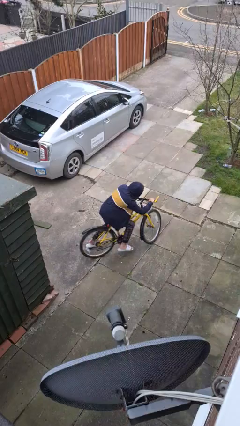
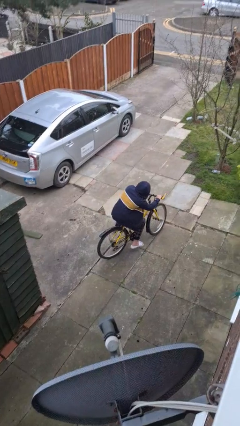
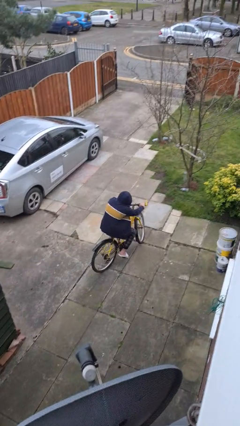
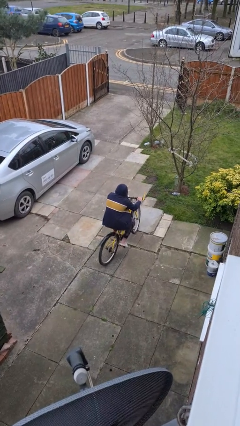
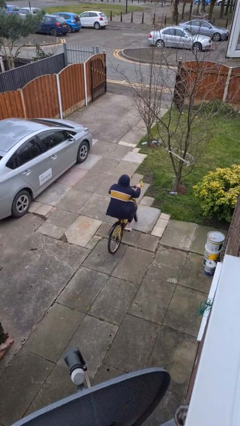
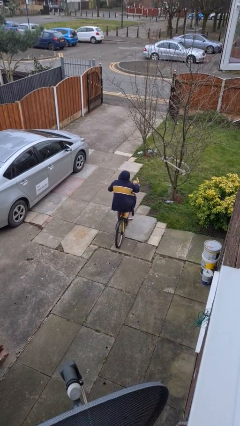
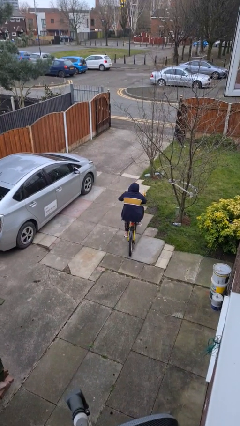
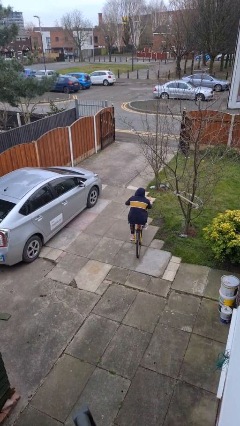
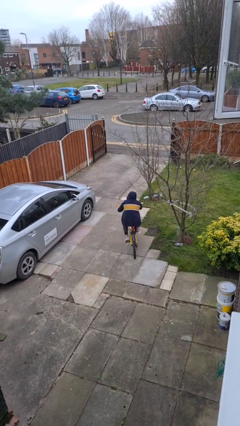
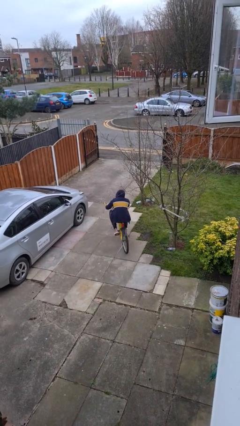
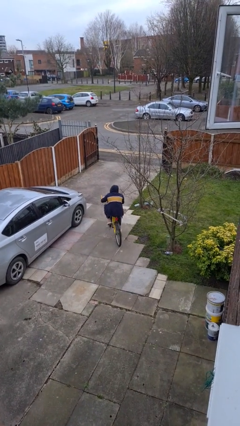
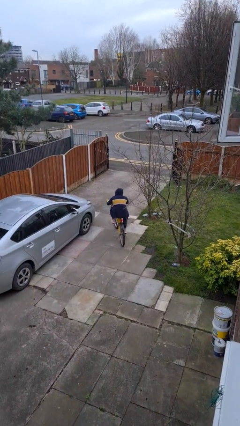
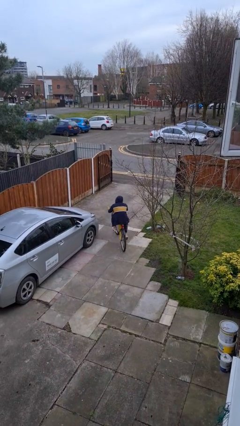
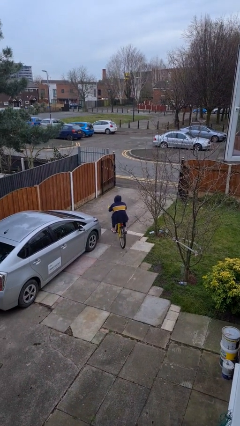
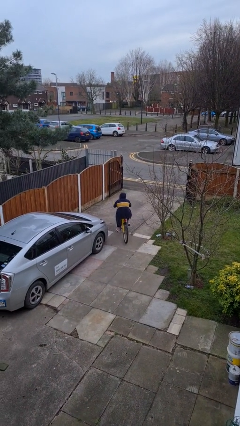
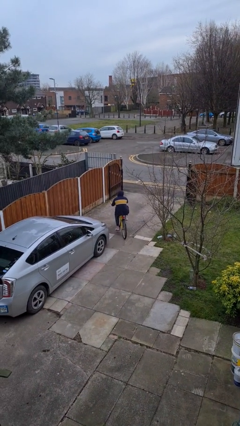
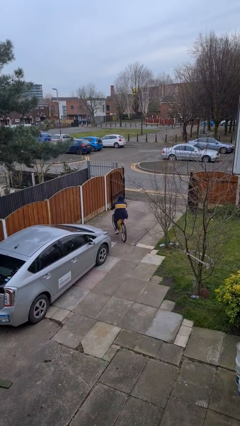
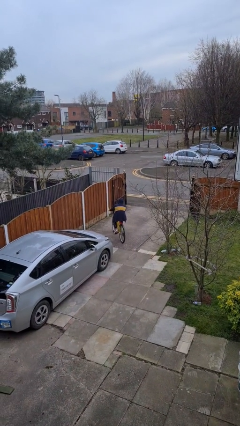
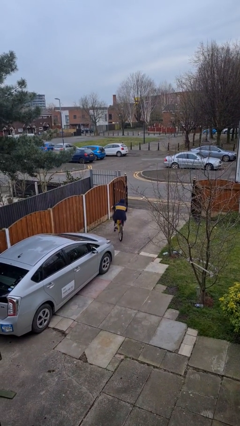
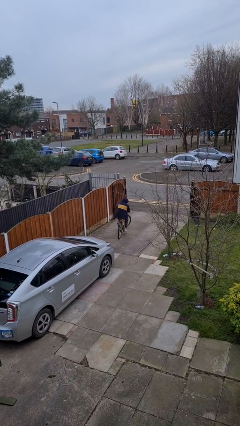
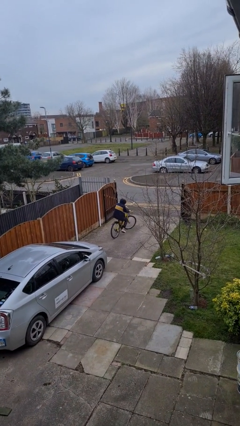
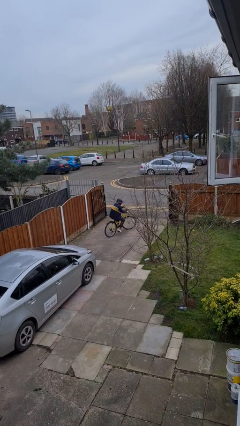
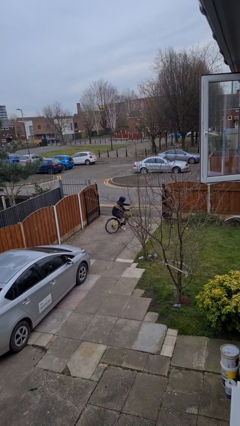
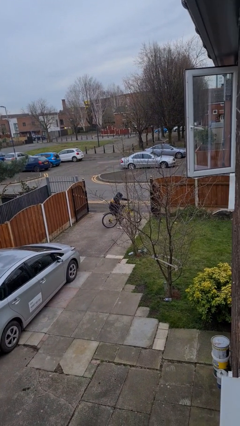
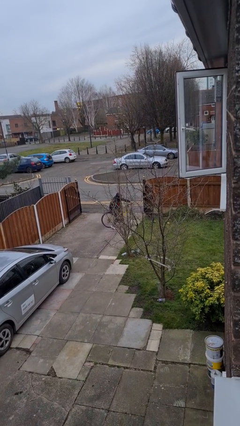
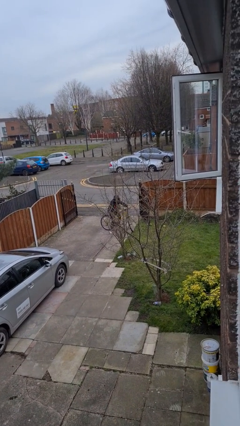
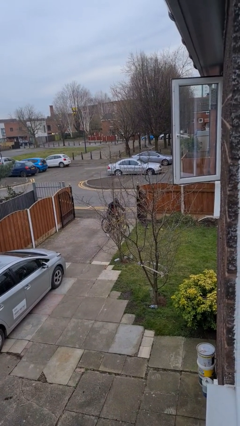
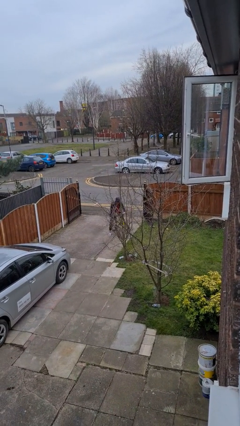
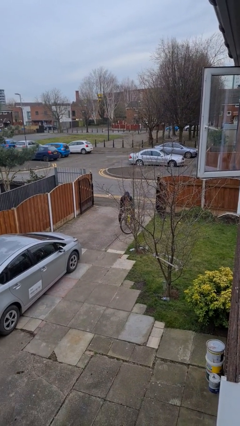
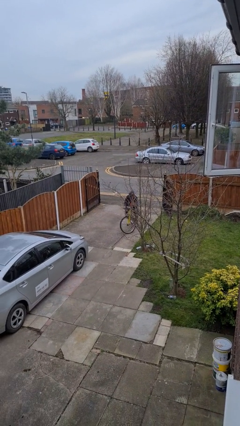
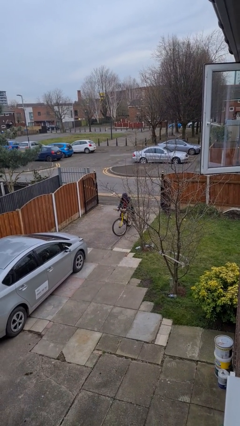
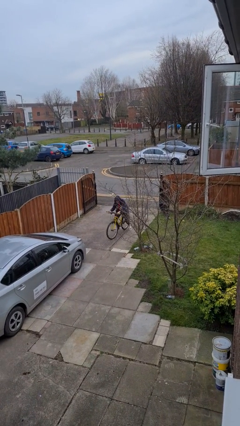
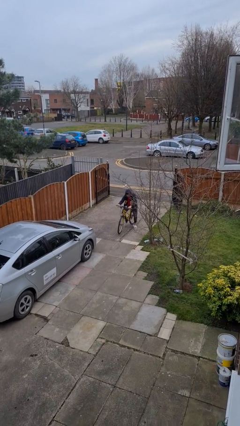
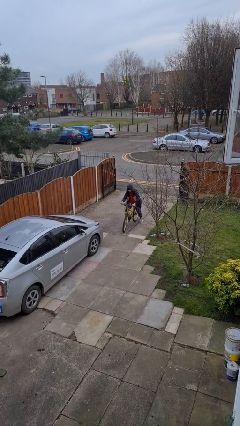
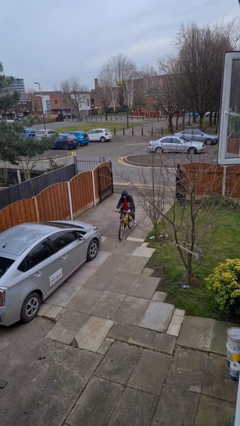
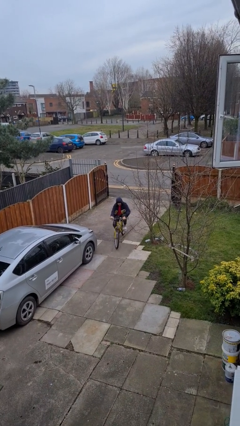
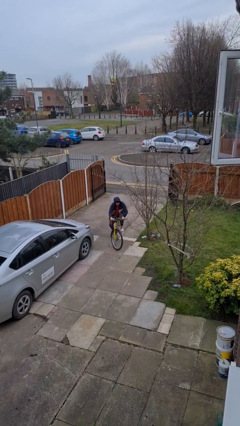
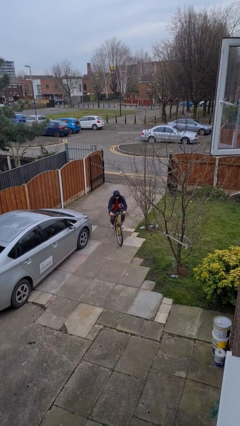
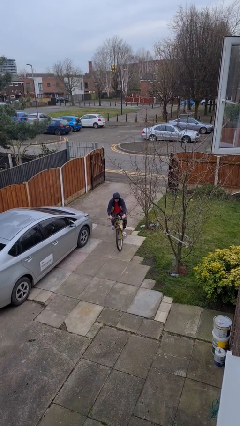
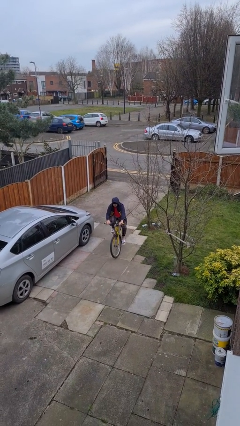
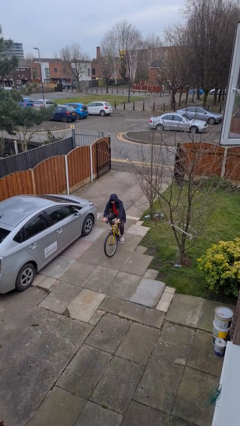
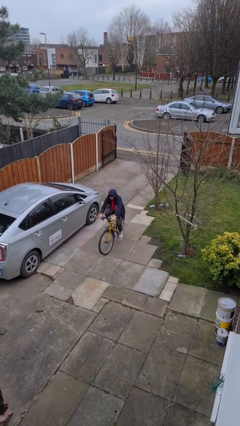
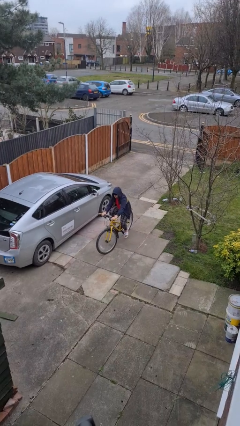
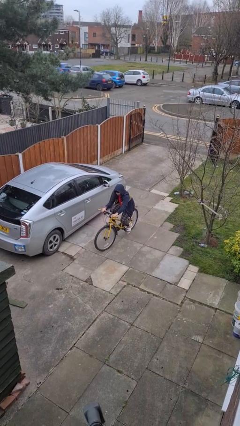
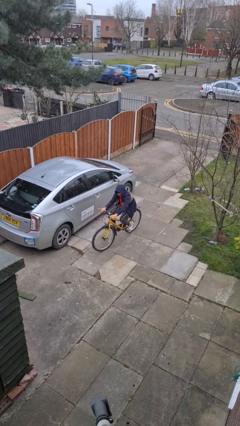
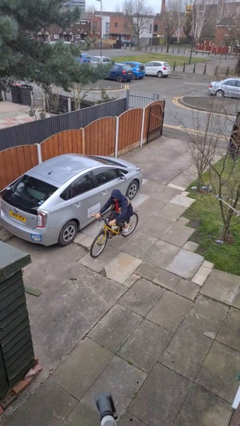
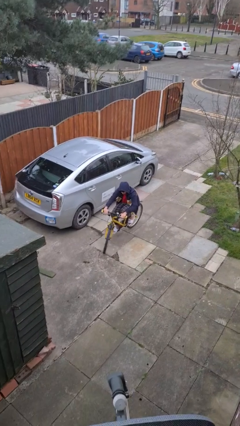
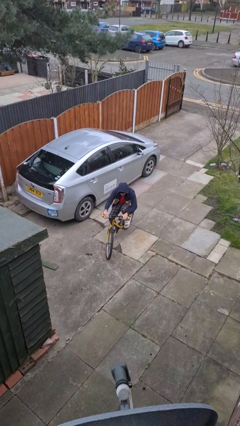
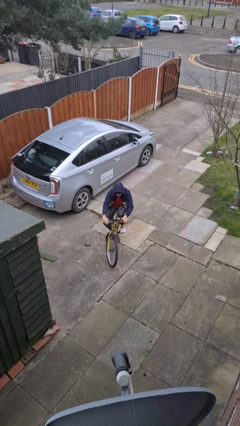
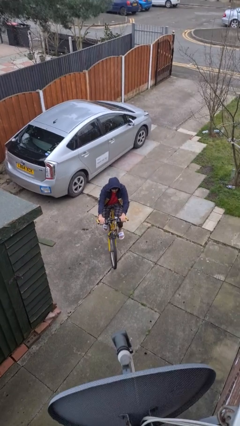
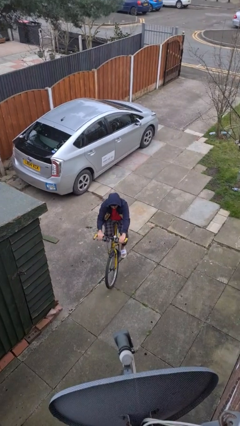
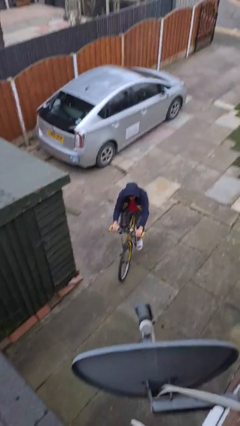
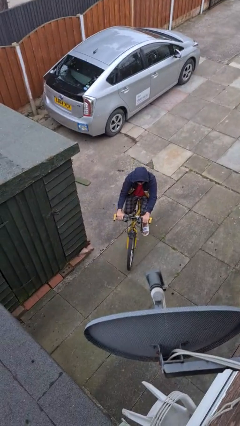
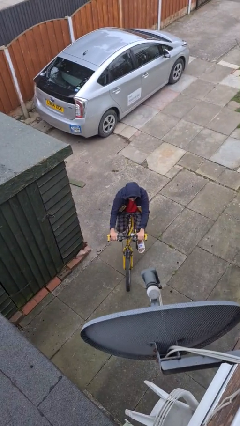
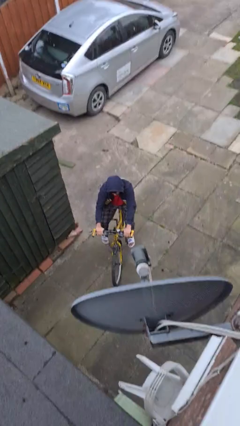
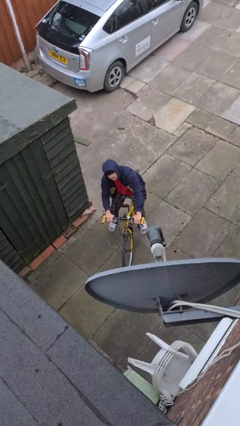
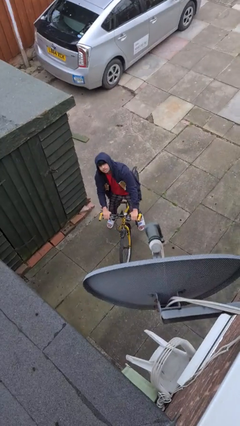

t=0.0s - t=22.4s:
person rides bicycle

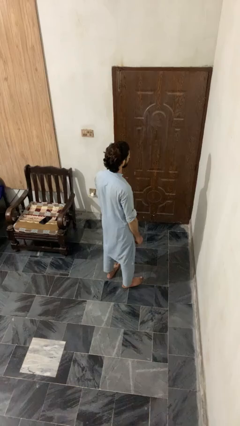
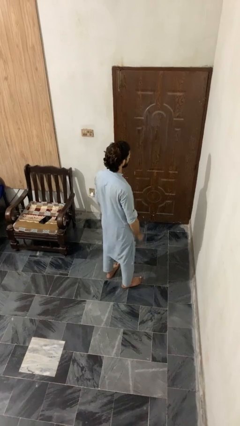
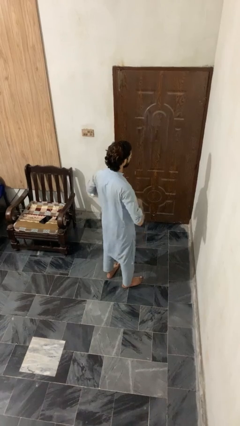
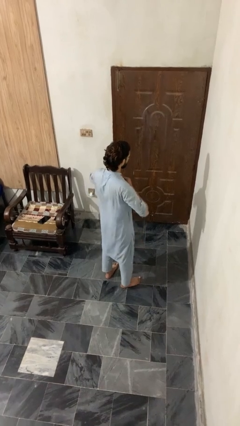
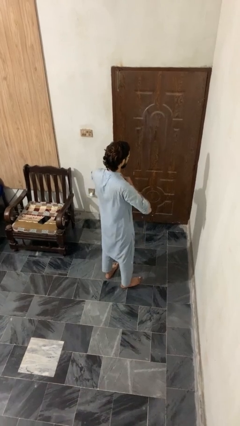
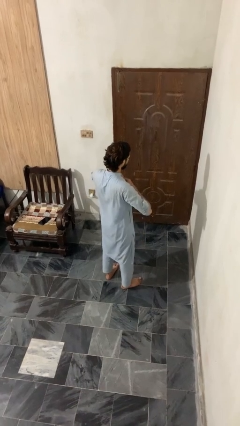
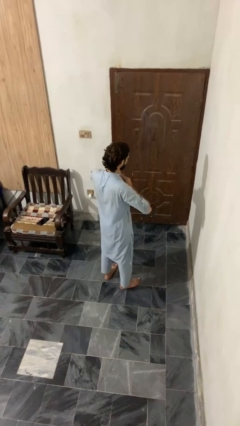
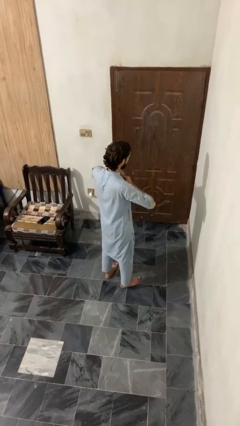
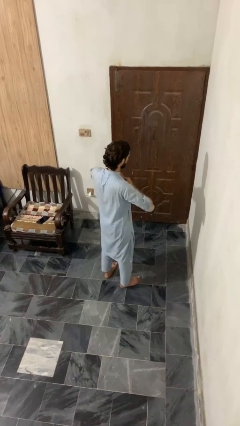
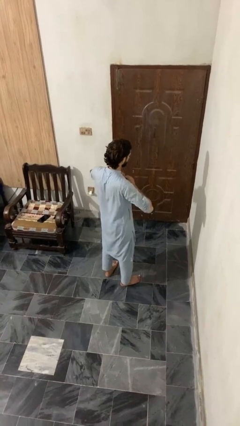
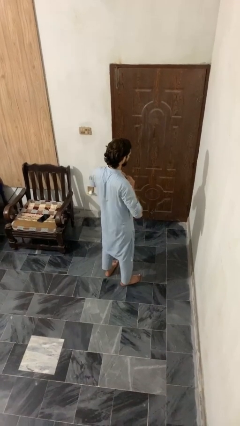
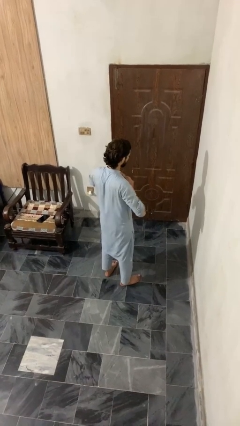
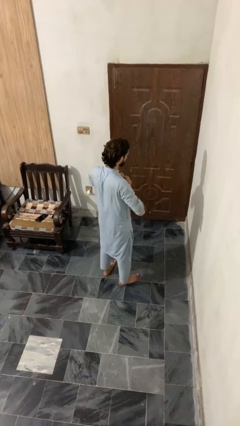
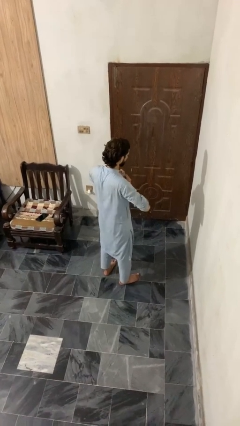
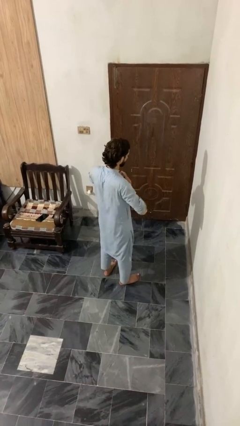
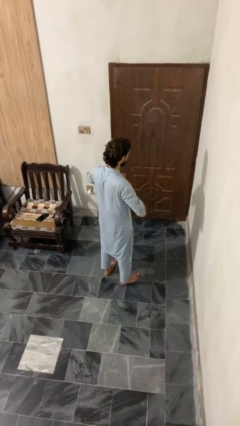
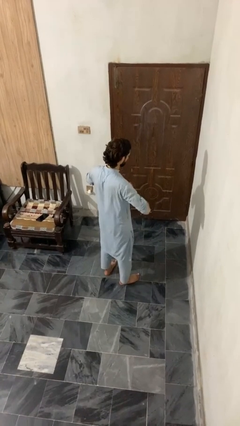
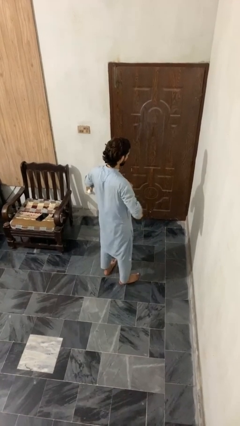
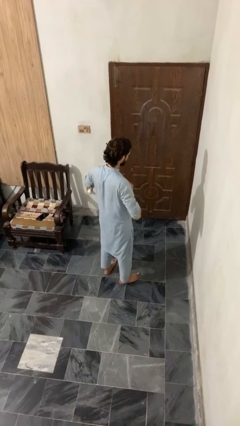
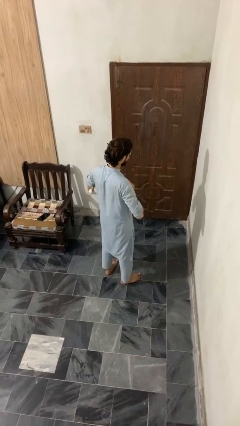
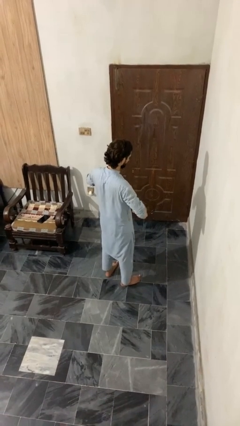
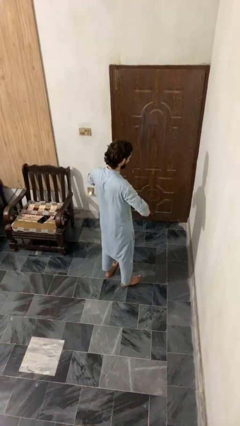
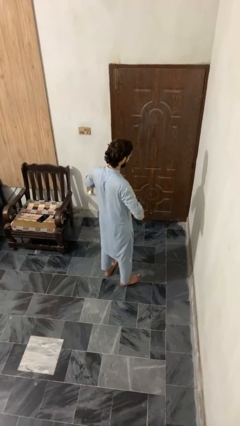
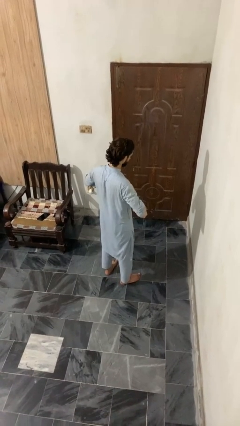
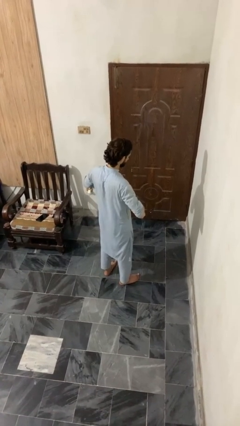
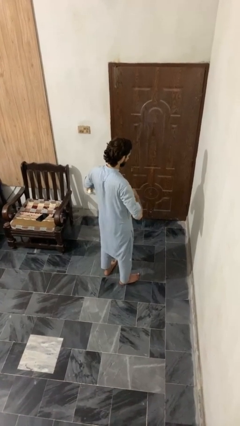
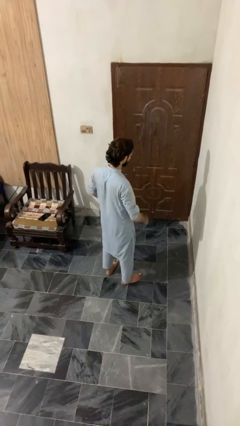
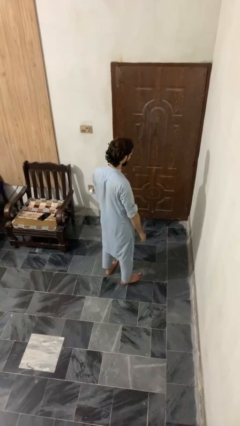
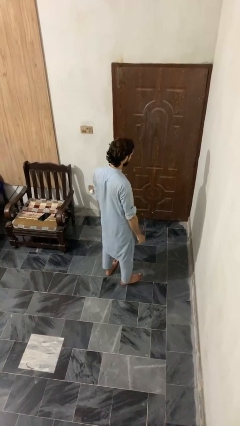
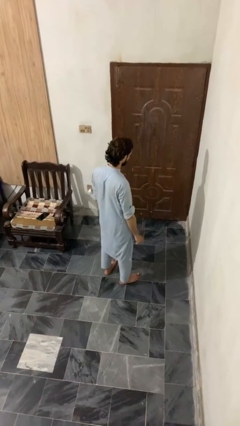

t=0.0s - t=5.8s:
person unbuttons shirt

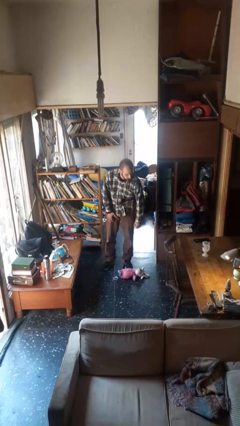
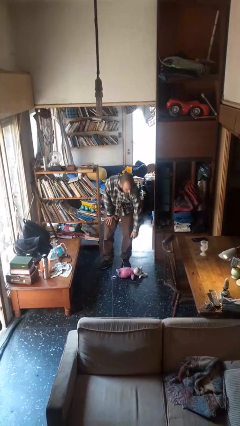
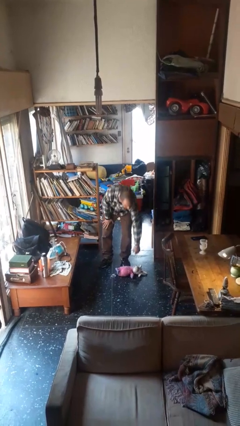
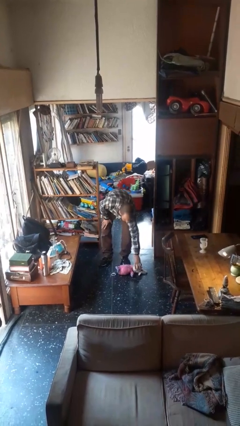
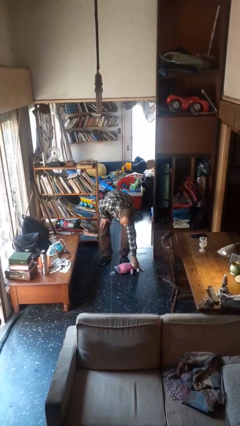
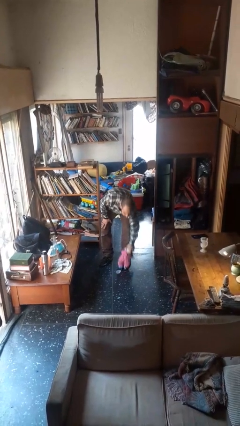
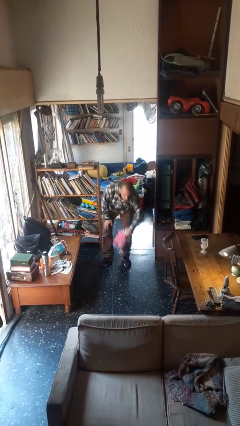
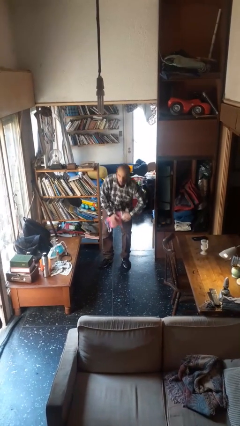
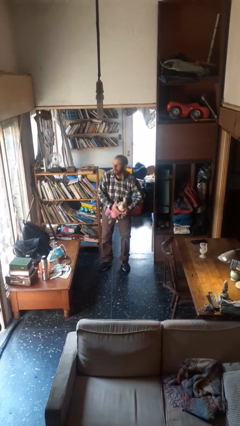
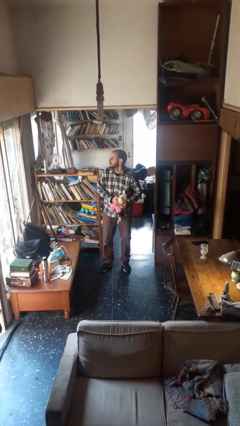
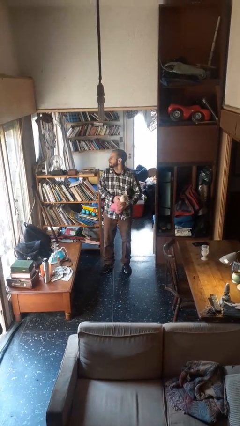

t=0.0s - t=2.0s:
person picks up object from floor
